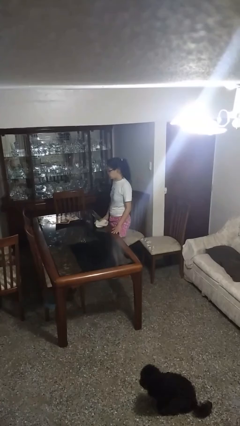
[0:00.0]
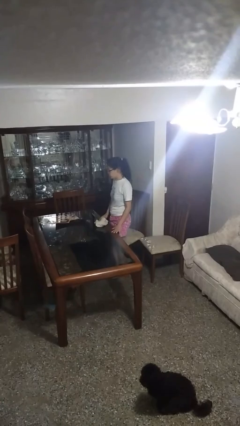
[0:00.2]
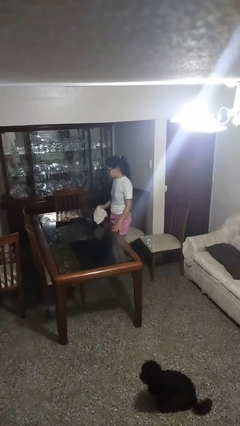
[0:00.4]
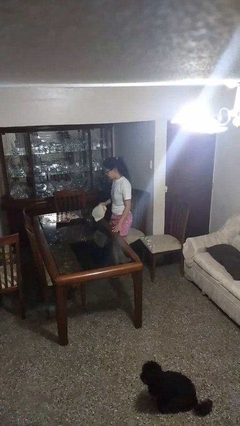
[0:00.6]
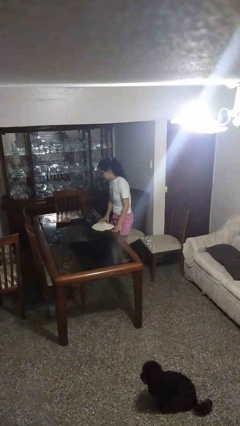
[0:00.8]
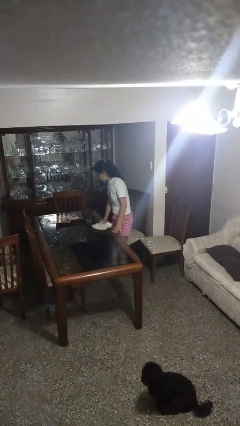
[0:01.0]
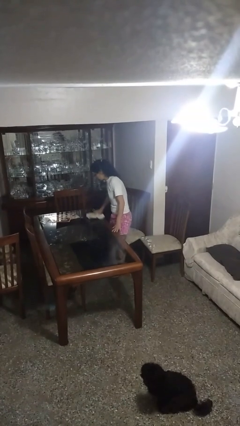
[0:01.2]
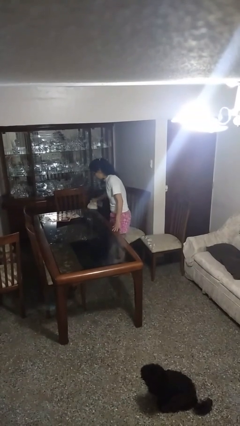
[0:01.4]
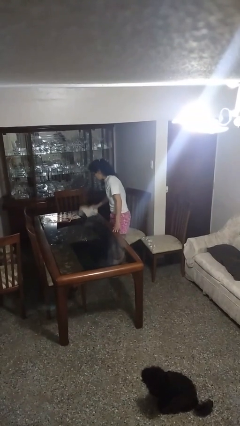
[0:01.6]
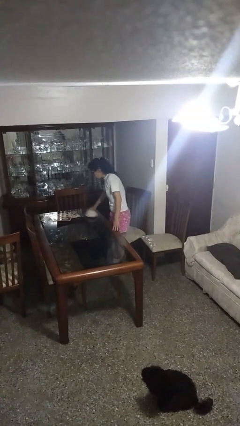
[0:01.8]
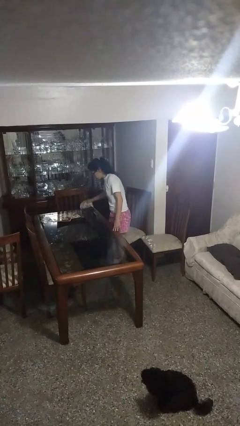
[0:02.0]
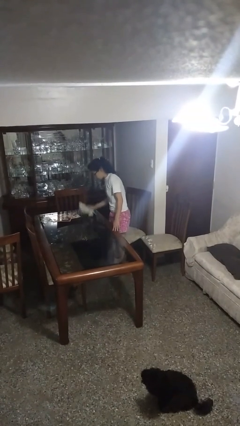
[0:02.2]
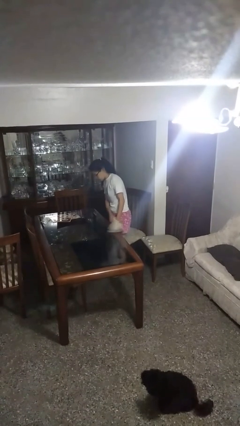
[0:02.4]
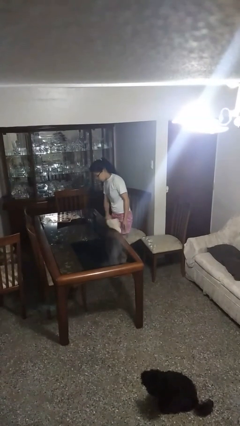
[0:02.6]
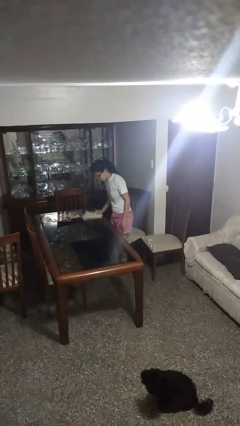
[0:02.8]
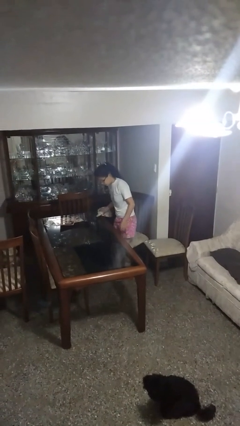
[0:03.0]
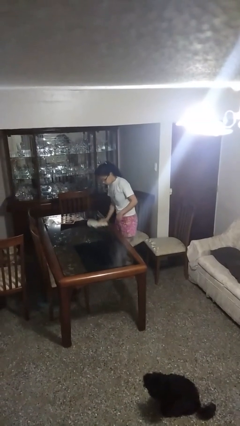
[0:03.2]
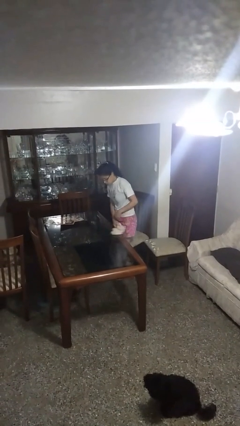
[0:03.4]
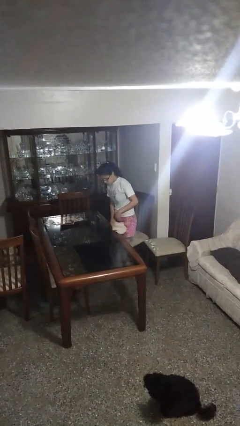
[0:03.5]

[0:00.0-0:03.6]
person cleans table with rag

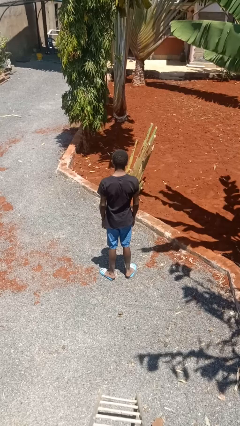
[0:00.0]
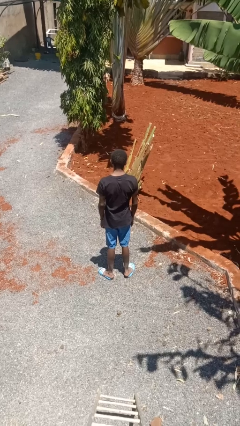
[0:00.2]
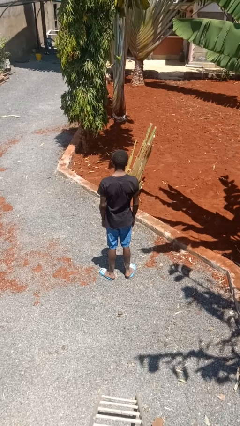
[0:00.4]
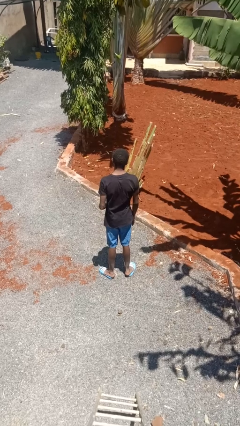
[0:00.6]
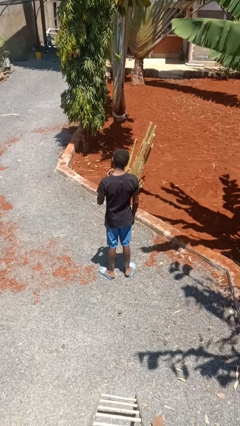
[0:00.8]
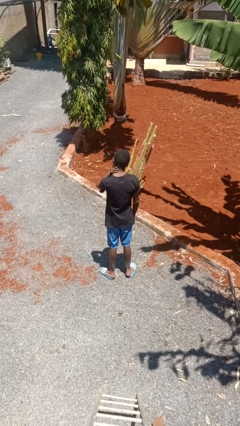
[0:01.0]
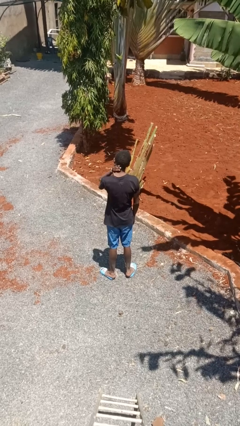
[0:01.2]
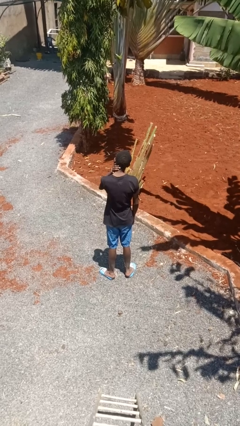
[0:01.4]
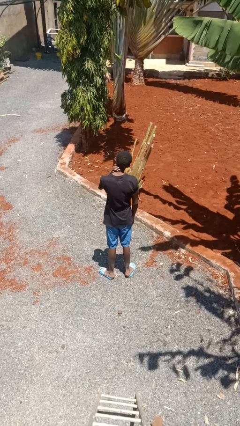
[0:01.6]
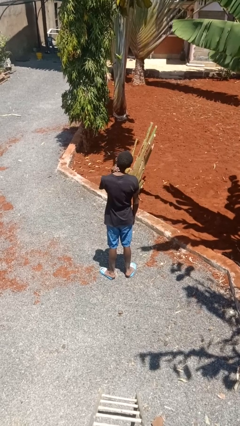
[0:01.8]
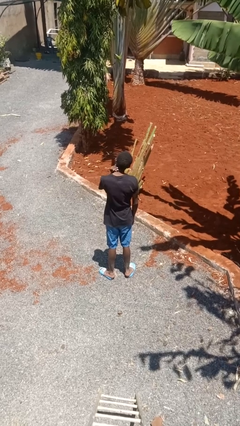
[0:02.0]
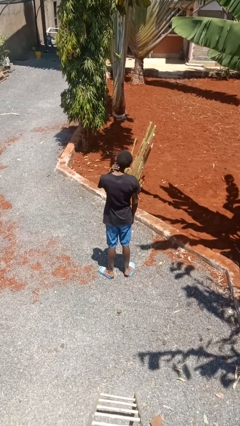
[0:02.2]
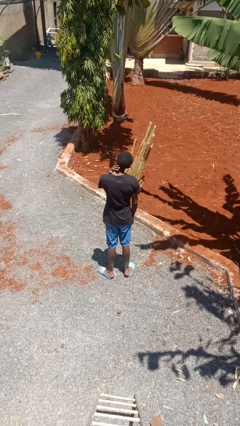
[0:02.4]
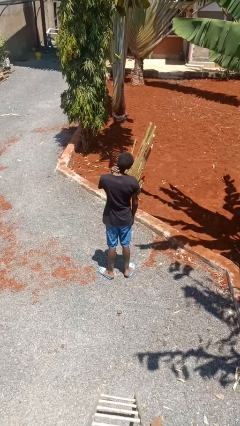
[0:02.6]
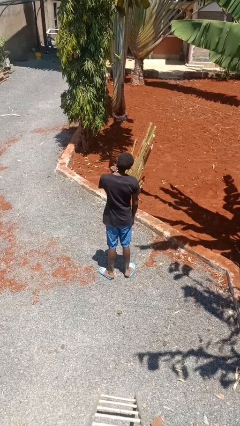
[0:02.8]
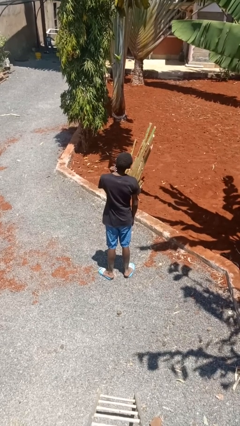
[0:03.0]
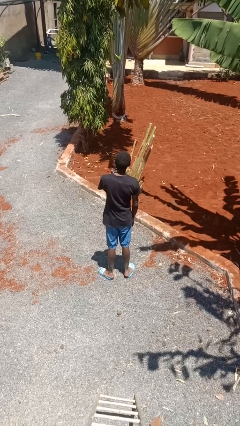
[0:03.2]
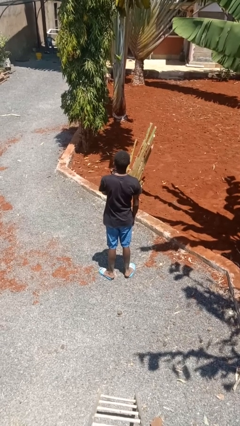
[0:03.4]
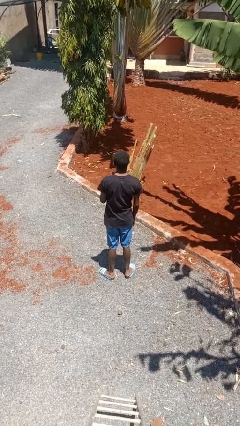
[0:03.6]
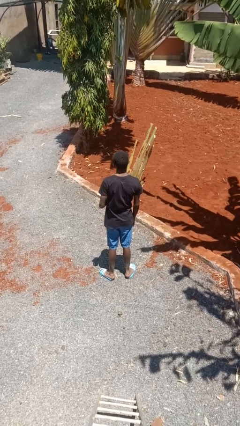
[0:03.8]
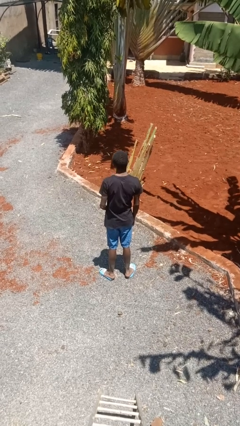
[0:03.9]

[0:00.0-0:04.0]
person rubs neck

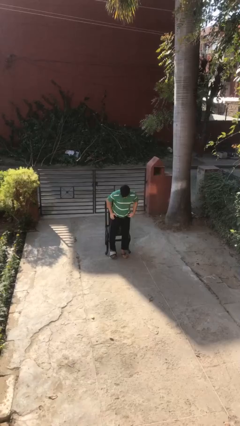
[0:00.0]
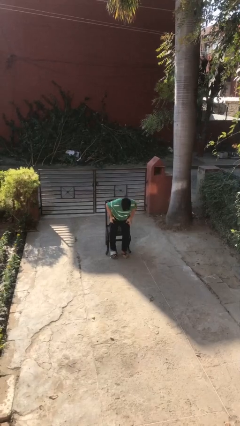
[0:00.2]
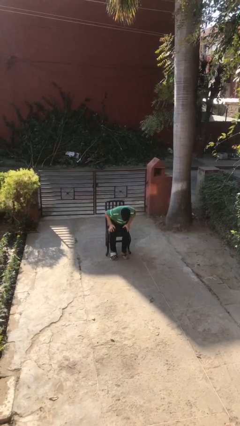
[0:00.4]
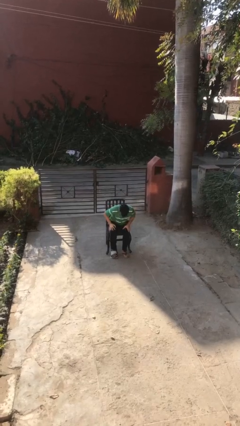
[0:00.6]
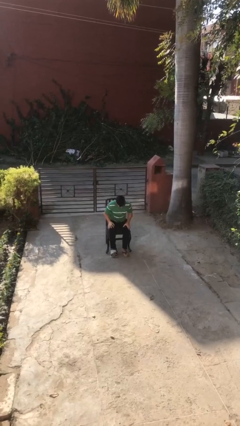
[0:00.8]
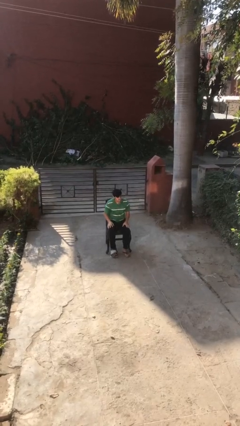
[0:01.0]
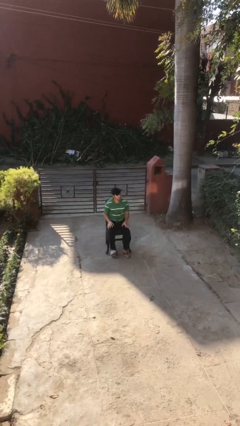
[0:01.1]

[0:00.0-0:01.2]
person sits down

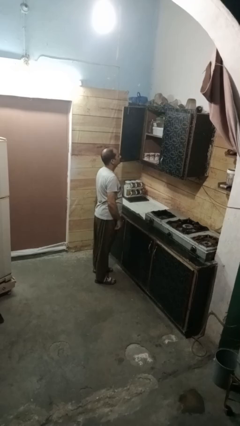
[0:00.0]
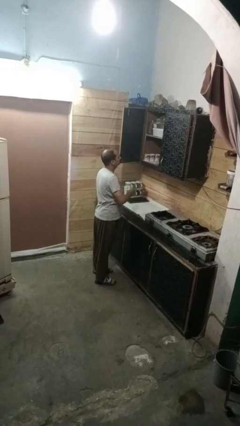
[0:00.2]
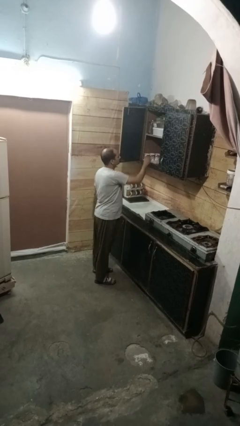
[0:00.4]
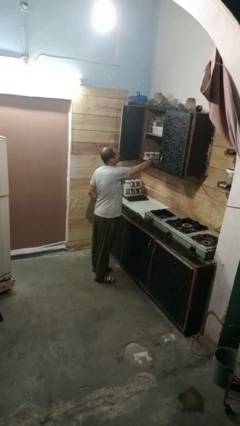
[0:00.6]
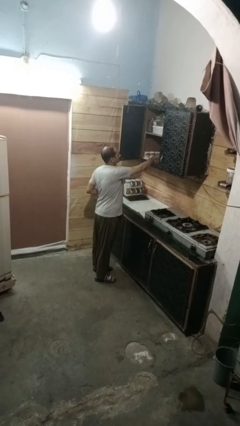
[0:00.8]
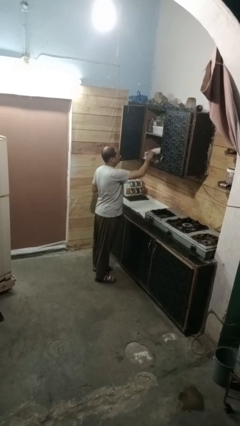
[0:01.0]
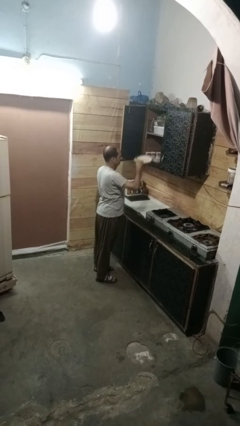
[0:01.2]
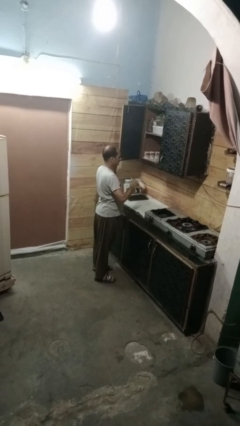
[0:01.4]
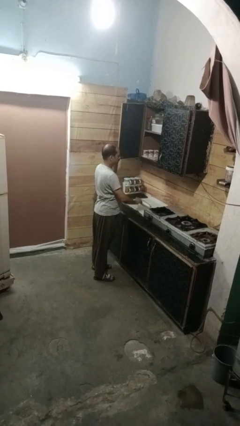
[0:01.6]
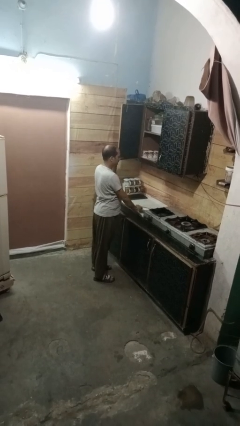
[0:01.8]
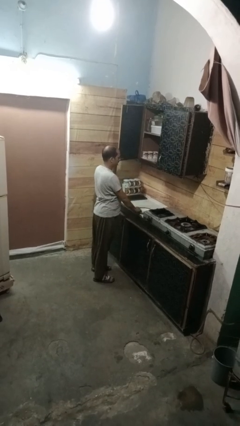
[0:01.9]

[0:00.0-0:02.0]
person takes object from cabinet

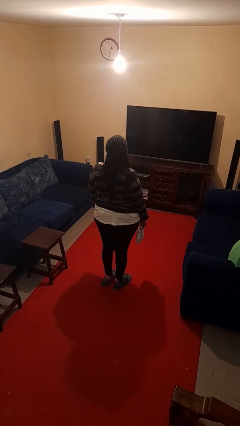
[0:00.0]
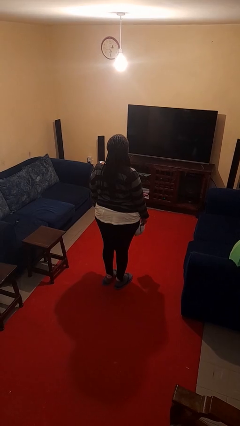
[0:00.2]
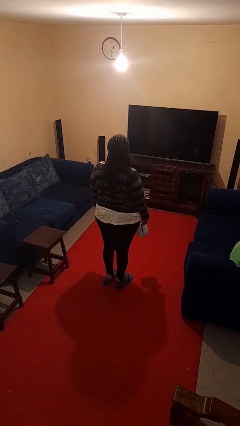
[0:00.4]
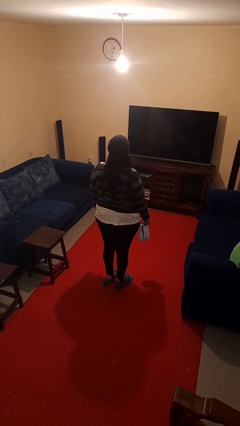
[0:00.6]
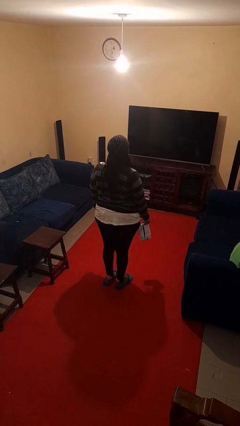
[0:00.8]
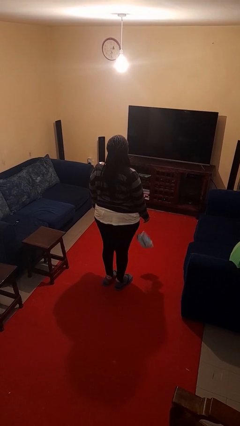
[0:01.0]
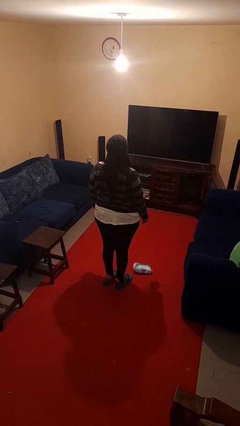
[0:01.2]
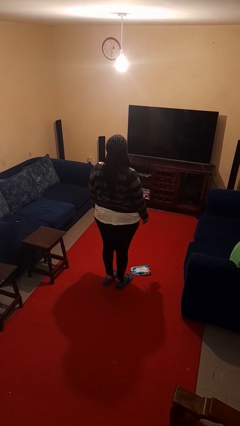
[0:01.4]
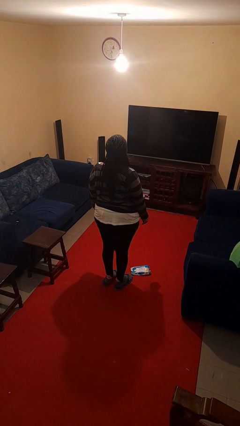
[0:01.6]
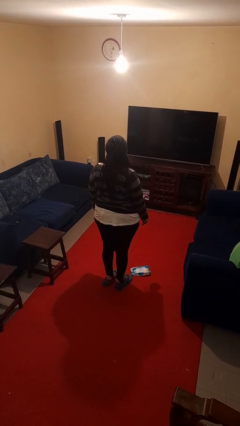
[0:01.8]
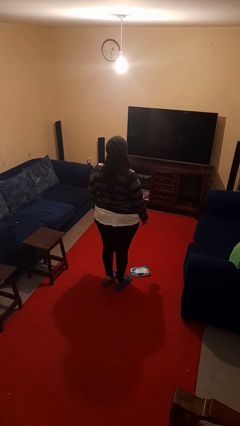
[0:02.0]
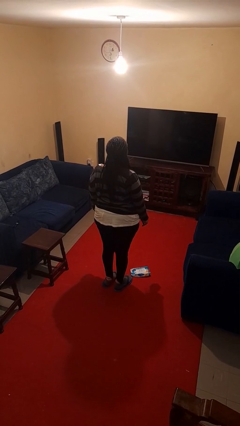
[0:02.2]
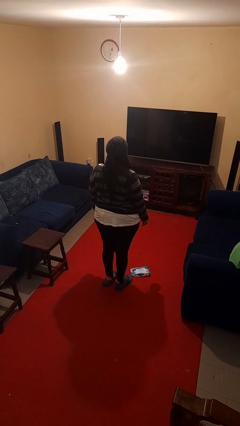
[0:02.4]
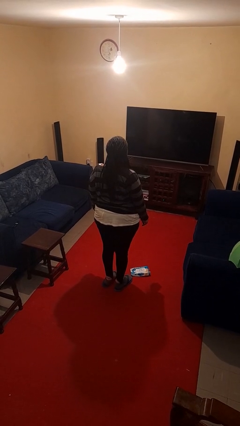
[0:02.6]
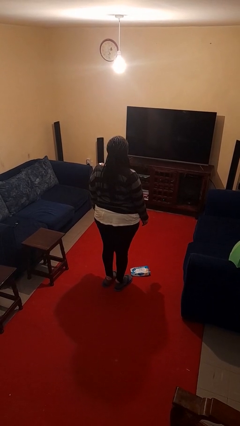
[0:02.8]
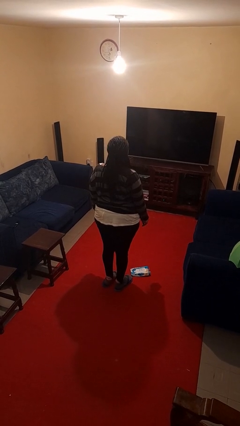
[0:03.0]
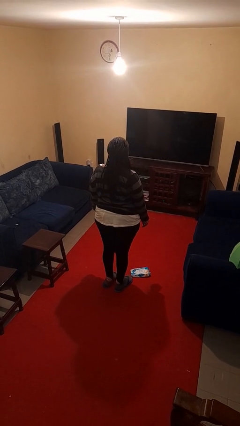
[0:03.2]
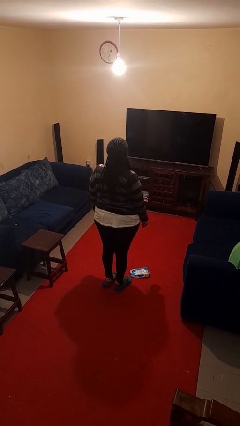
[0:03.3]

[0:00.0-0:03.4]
person drops object

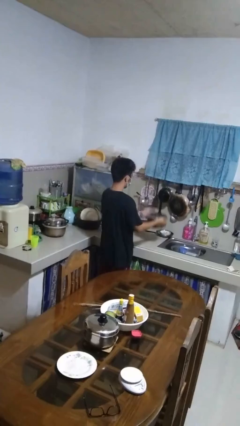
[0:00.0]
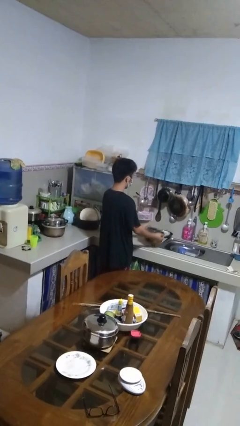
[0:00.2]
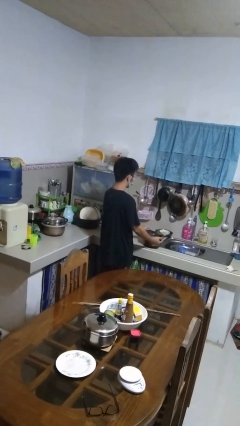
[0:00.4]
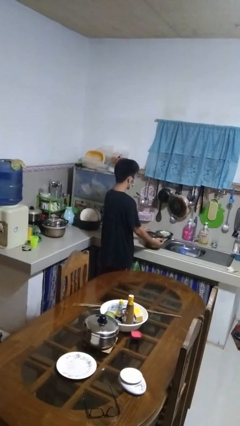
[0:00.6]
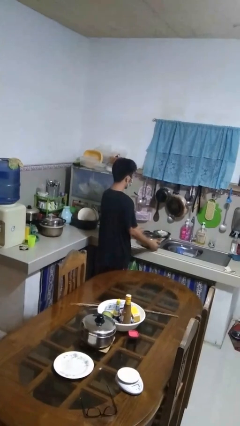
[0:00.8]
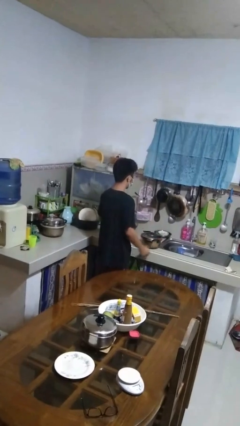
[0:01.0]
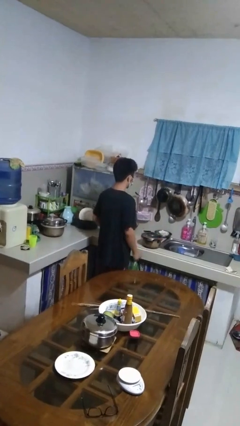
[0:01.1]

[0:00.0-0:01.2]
person puts down object on countertop

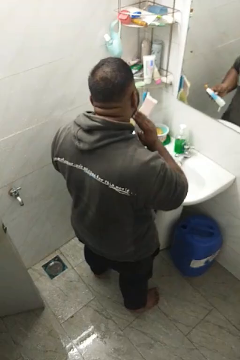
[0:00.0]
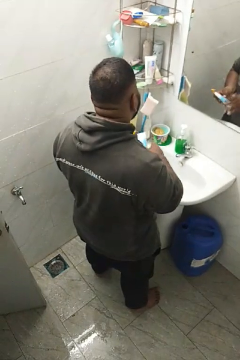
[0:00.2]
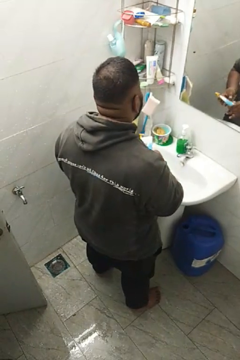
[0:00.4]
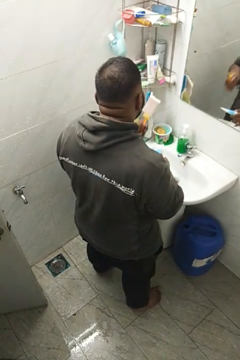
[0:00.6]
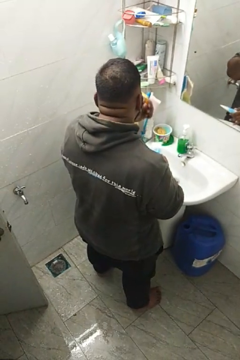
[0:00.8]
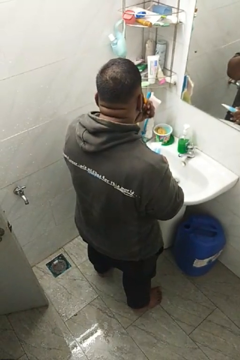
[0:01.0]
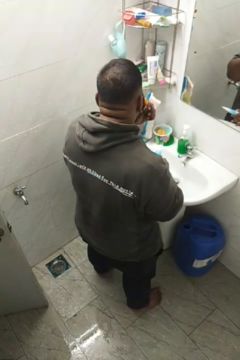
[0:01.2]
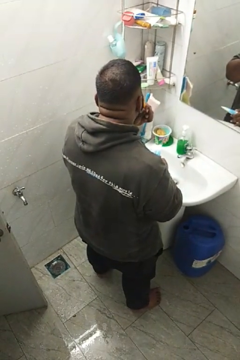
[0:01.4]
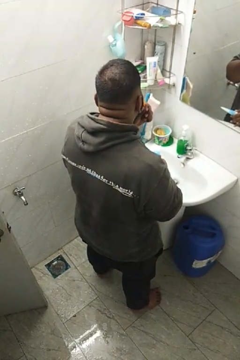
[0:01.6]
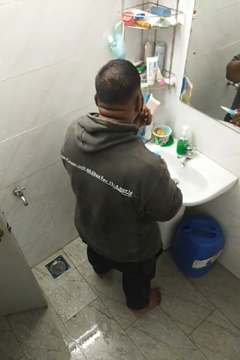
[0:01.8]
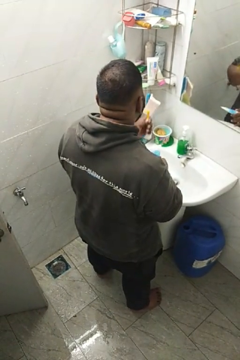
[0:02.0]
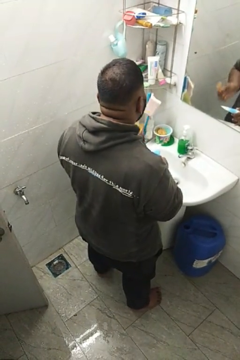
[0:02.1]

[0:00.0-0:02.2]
person shaves face

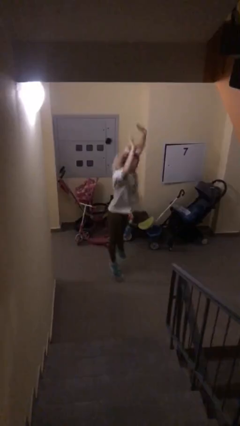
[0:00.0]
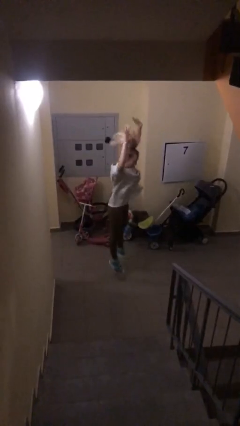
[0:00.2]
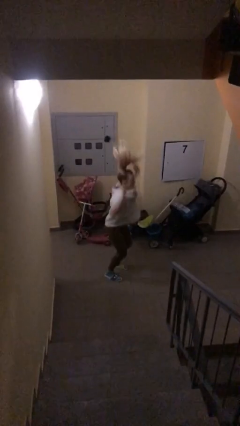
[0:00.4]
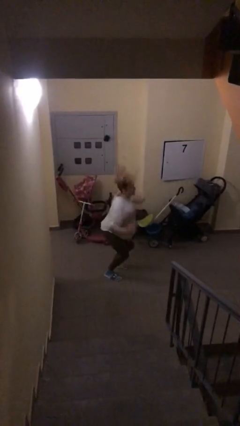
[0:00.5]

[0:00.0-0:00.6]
person jumps
